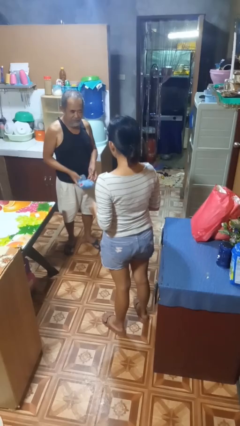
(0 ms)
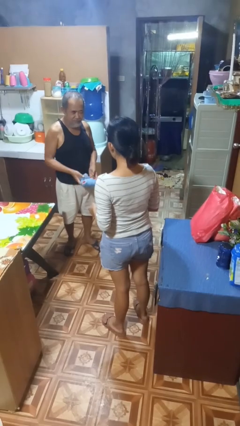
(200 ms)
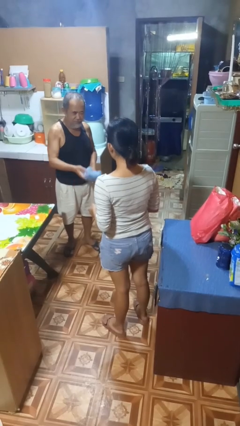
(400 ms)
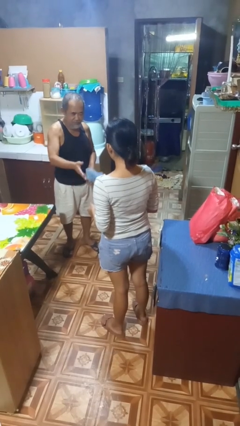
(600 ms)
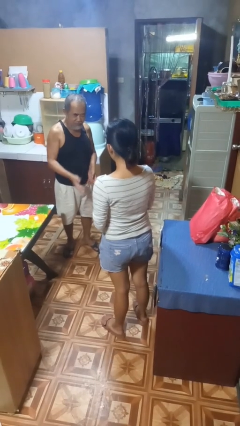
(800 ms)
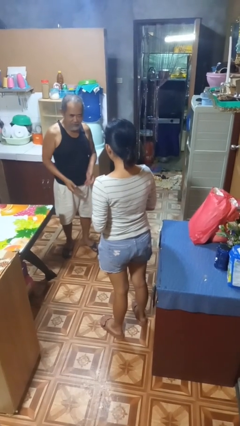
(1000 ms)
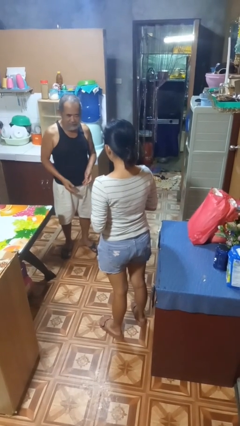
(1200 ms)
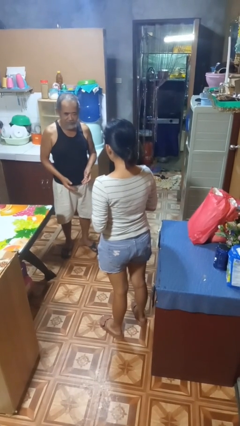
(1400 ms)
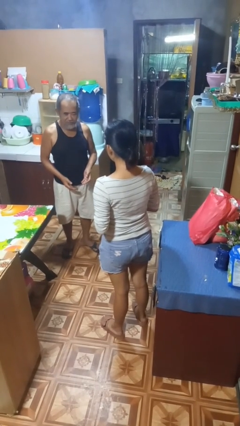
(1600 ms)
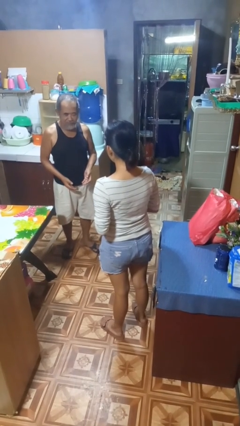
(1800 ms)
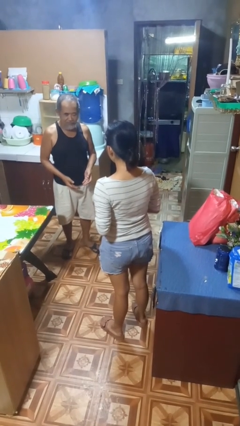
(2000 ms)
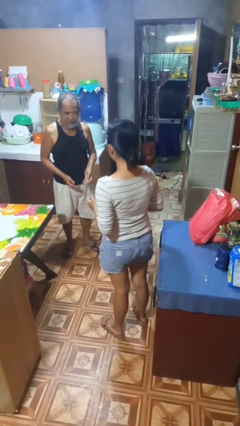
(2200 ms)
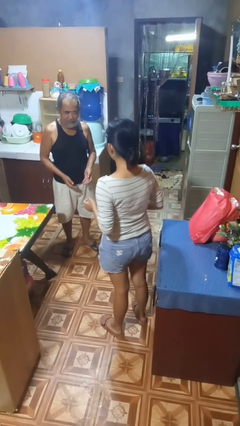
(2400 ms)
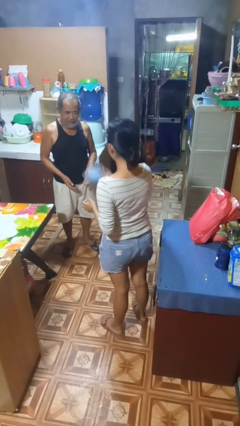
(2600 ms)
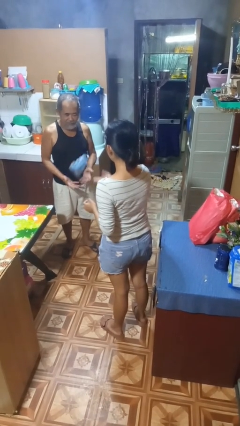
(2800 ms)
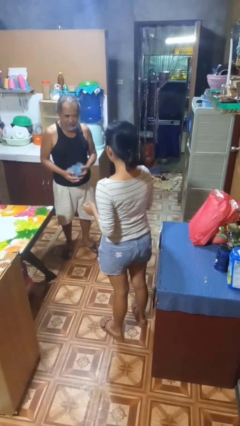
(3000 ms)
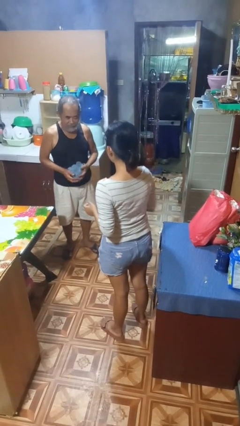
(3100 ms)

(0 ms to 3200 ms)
person catches object from person

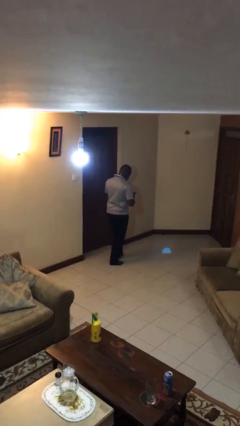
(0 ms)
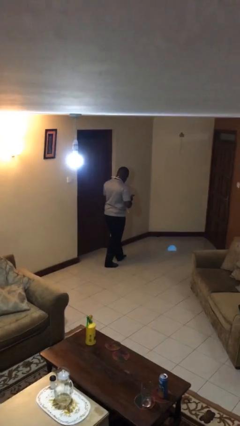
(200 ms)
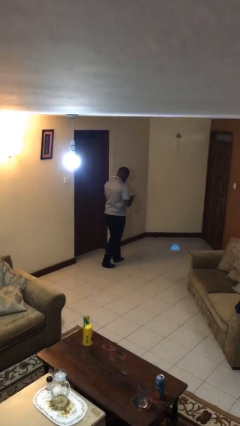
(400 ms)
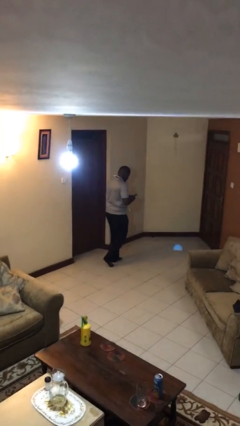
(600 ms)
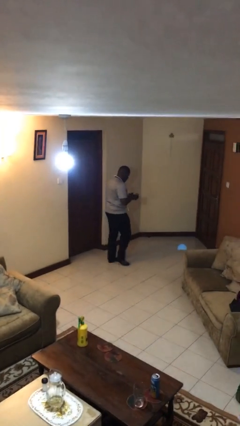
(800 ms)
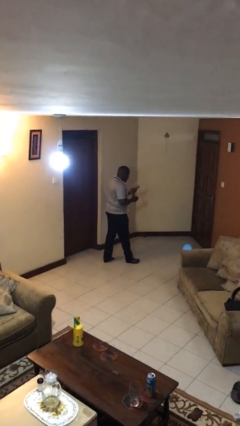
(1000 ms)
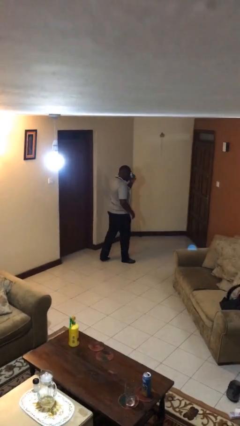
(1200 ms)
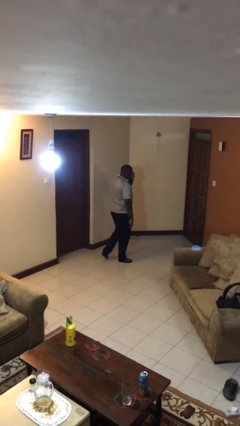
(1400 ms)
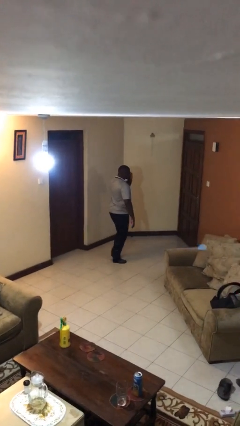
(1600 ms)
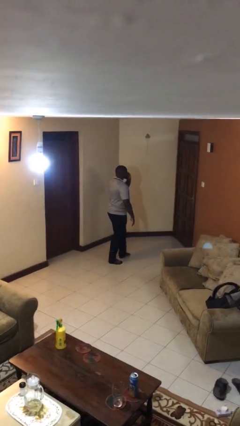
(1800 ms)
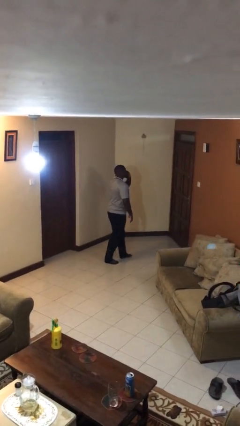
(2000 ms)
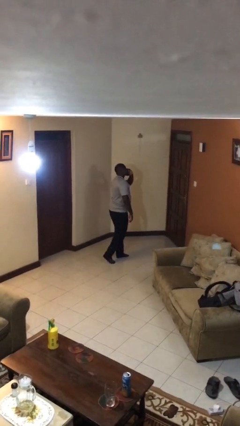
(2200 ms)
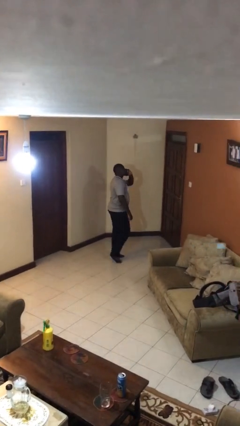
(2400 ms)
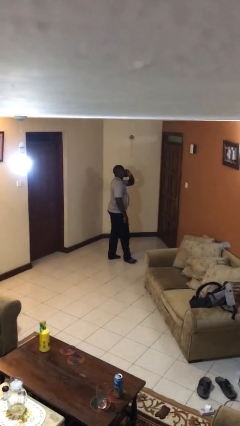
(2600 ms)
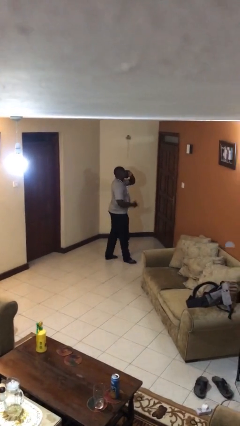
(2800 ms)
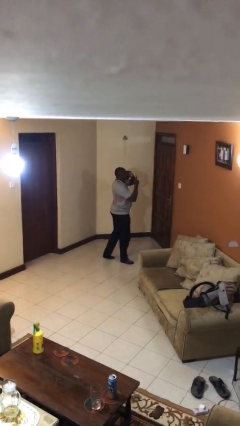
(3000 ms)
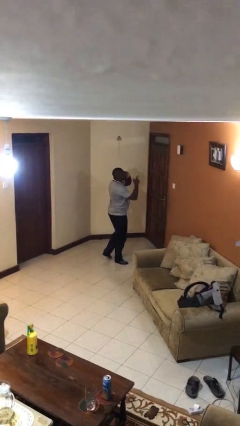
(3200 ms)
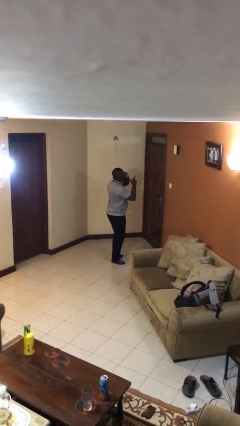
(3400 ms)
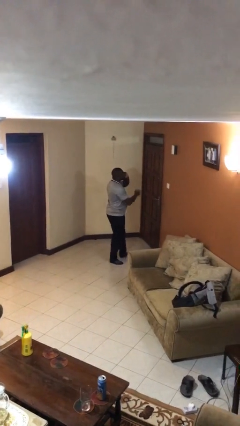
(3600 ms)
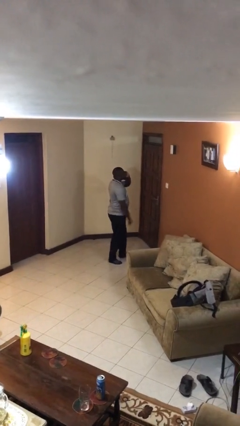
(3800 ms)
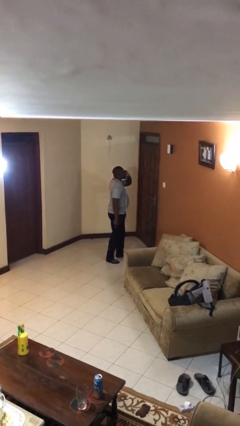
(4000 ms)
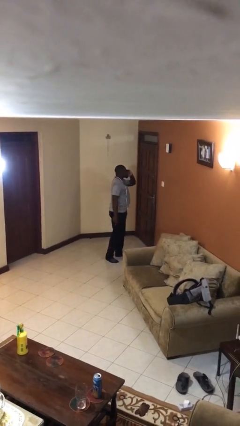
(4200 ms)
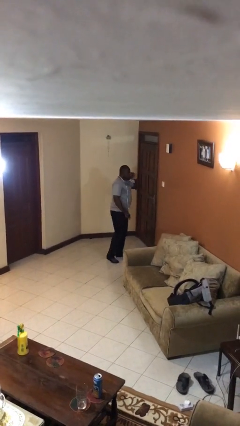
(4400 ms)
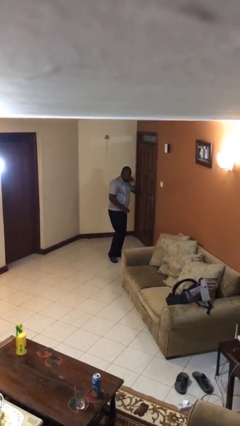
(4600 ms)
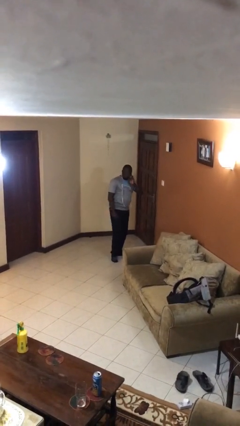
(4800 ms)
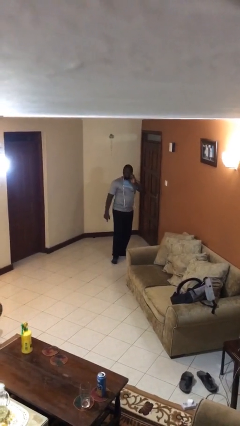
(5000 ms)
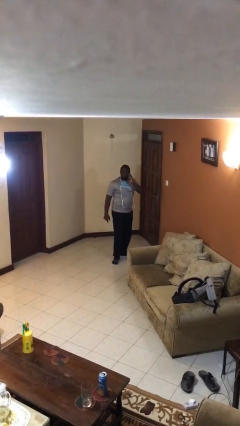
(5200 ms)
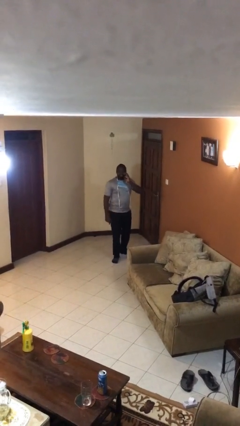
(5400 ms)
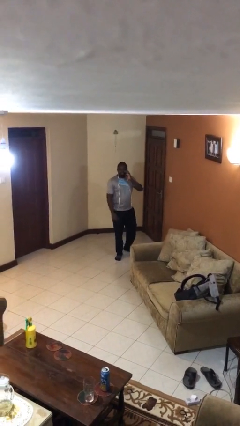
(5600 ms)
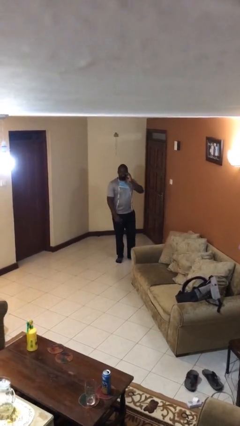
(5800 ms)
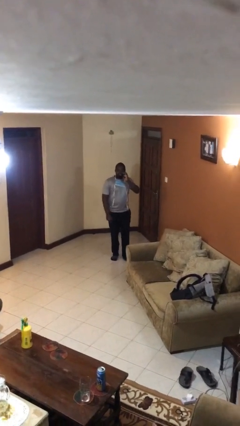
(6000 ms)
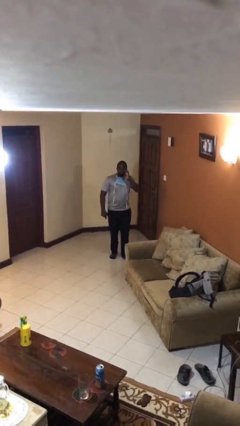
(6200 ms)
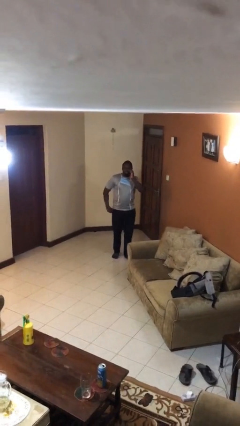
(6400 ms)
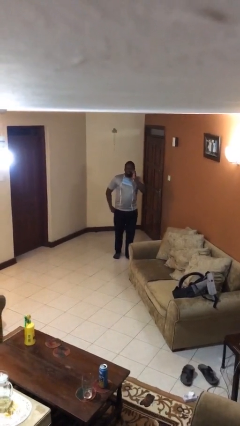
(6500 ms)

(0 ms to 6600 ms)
person talks on phone

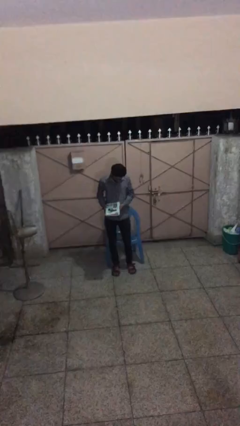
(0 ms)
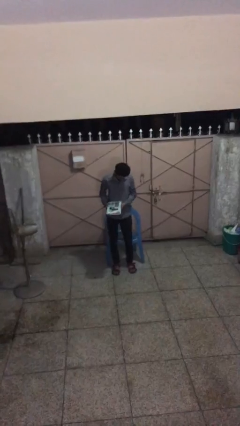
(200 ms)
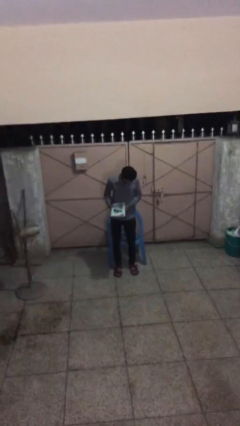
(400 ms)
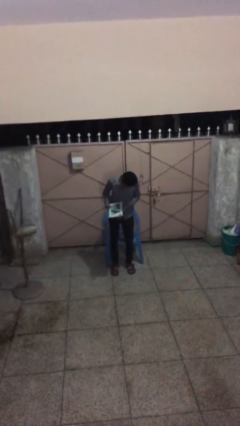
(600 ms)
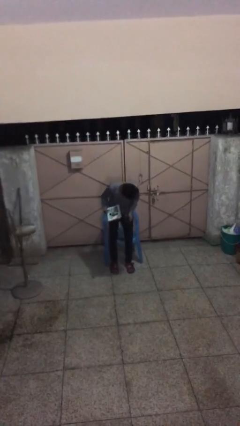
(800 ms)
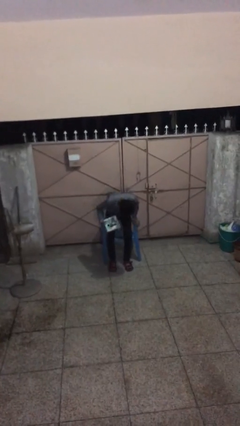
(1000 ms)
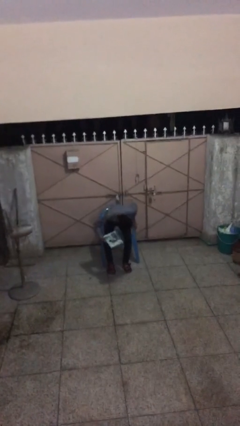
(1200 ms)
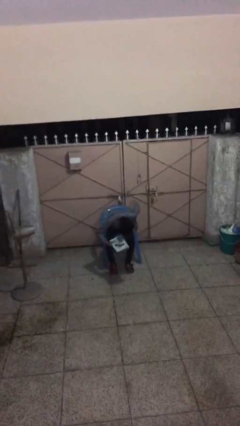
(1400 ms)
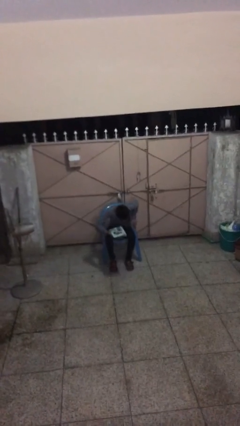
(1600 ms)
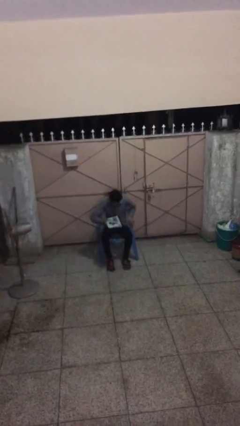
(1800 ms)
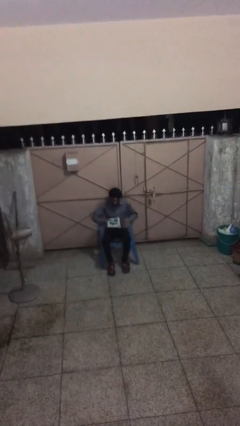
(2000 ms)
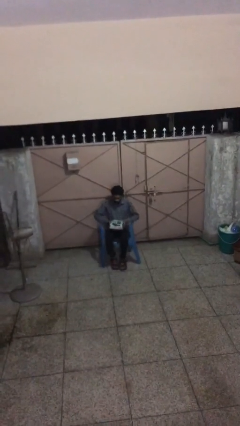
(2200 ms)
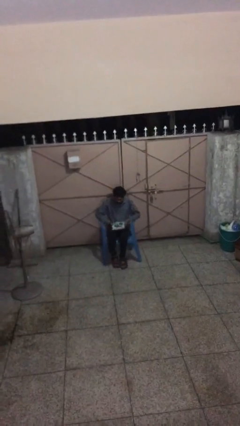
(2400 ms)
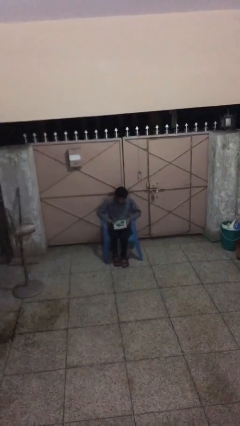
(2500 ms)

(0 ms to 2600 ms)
person sits down

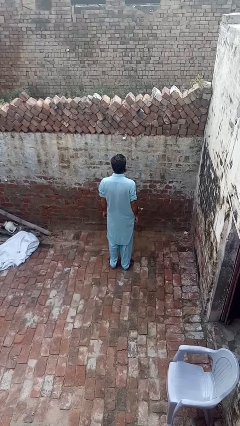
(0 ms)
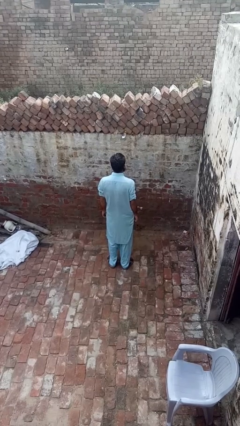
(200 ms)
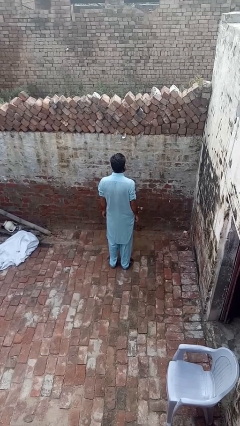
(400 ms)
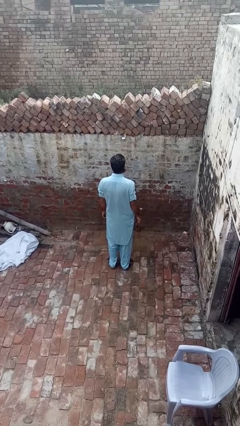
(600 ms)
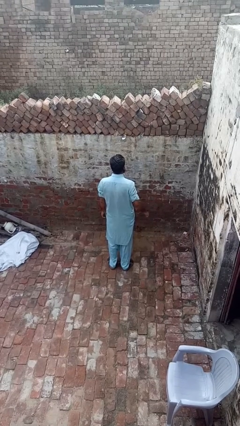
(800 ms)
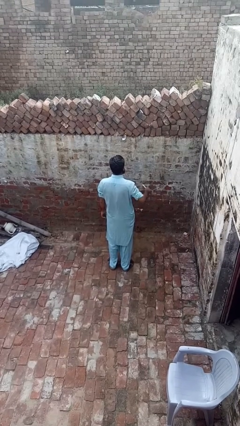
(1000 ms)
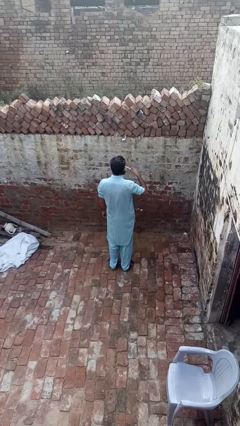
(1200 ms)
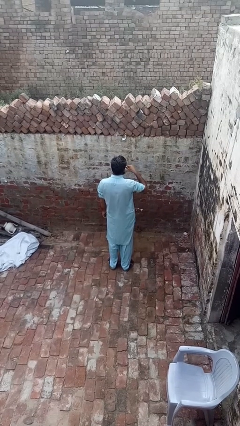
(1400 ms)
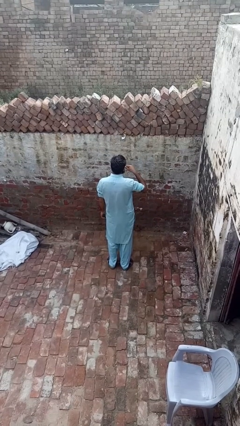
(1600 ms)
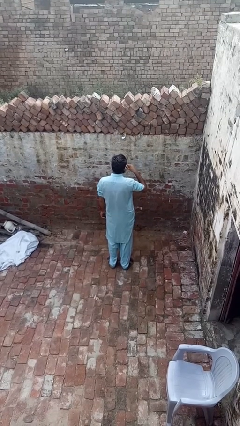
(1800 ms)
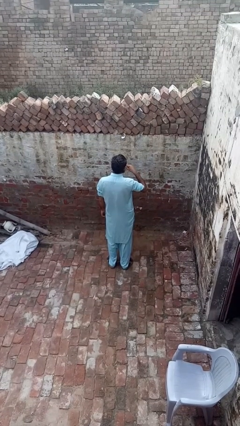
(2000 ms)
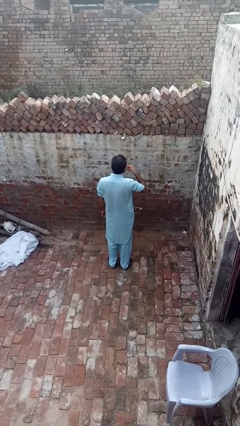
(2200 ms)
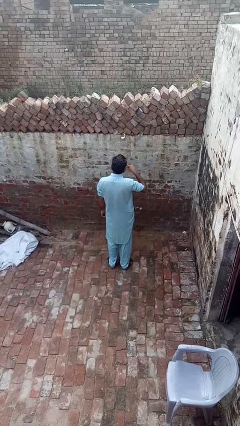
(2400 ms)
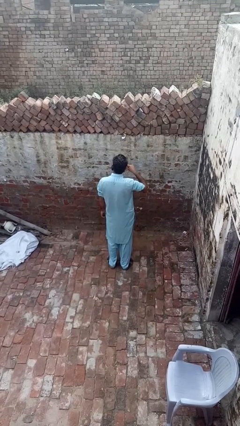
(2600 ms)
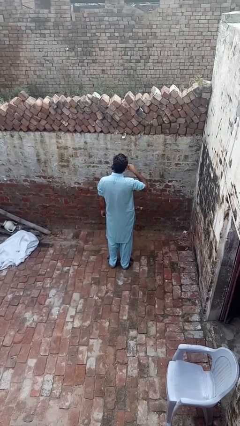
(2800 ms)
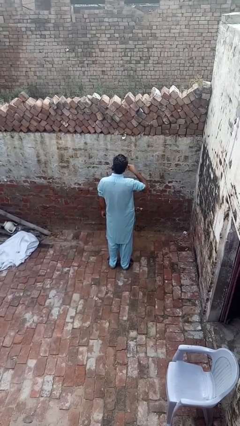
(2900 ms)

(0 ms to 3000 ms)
person brushes teeth

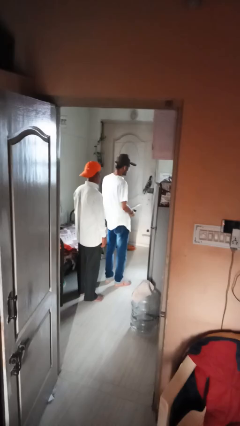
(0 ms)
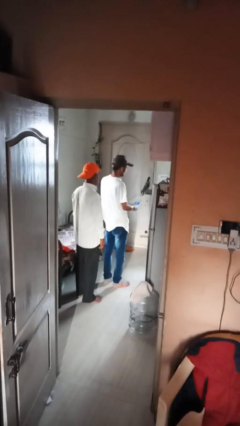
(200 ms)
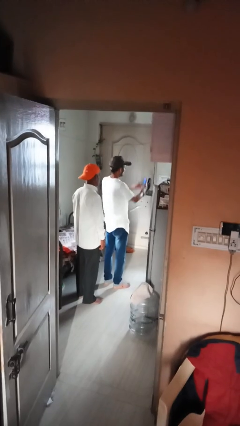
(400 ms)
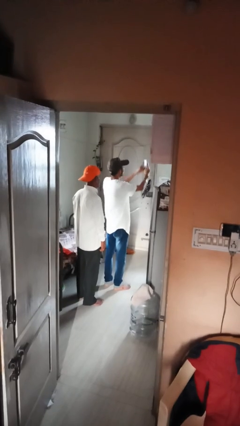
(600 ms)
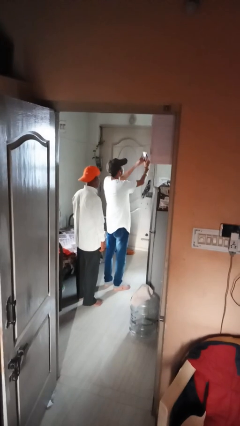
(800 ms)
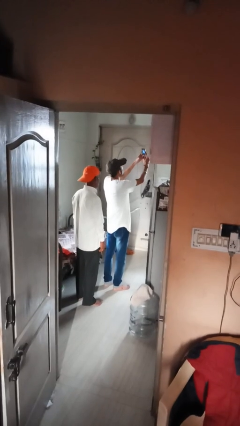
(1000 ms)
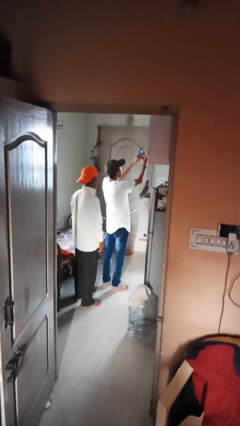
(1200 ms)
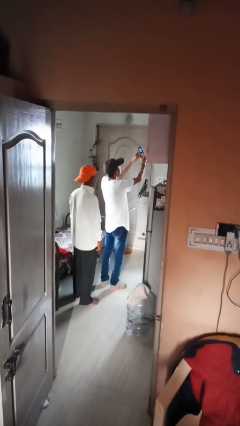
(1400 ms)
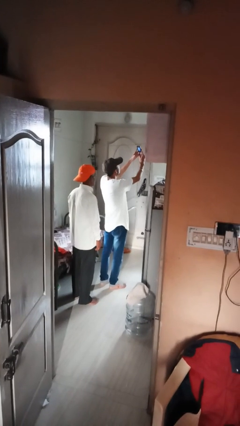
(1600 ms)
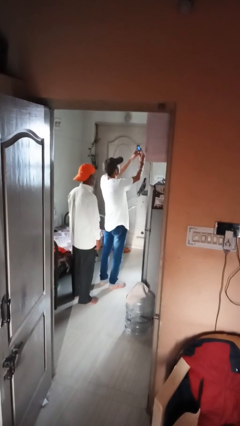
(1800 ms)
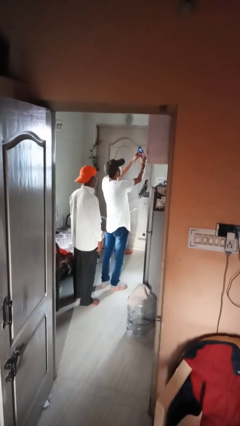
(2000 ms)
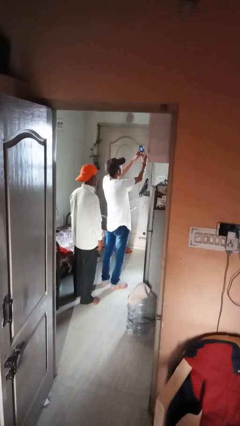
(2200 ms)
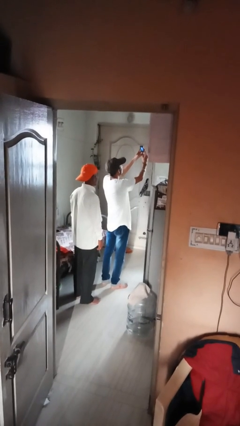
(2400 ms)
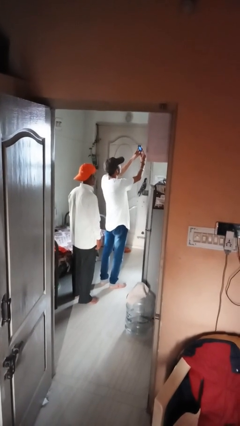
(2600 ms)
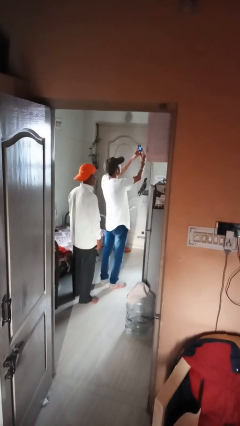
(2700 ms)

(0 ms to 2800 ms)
person takes selfie with person
